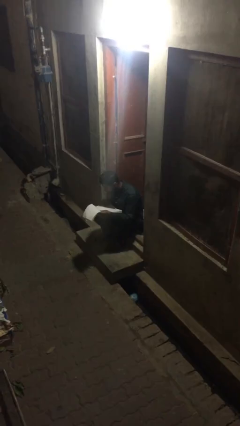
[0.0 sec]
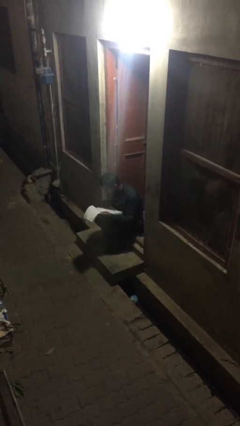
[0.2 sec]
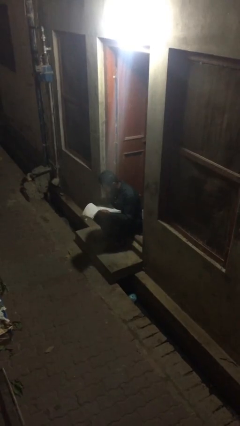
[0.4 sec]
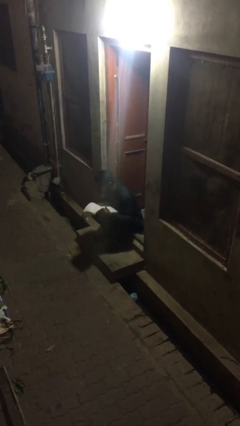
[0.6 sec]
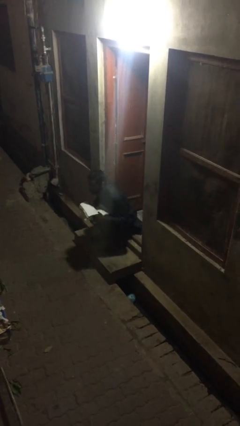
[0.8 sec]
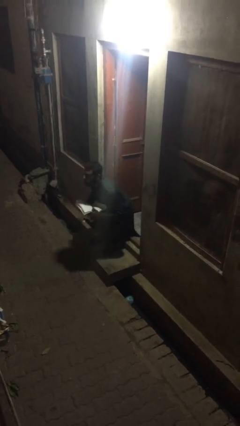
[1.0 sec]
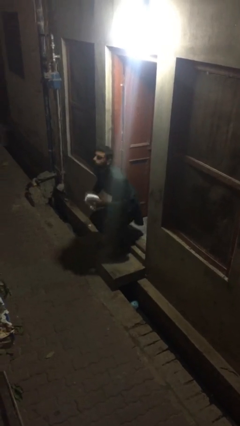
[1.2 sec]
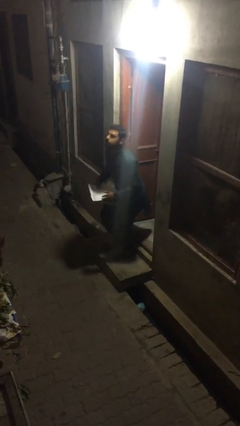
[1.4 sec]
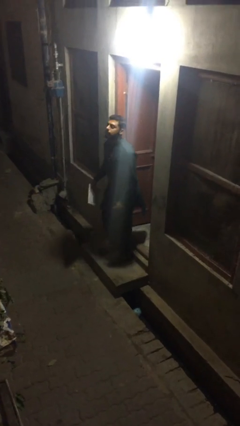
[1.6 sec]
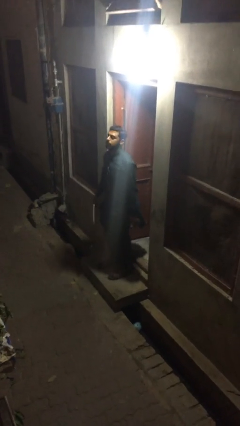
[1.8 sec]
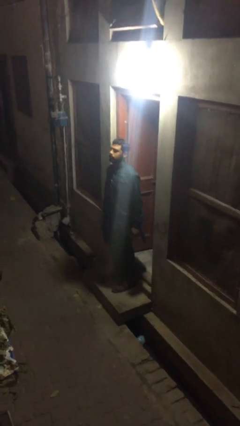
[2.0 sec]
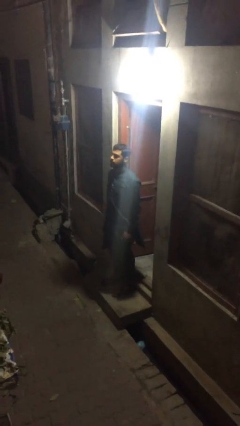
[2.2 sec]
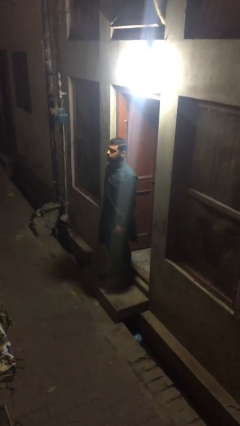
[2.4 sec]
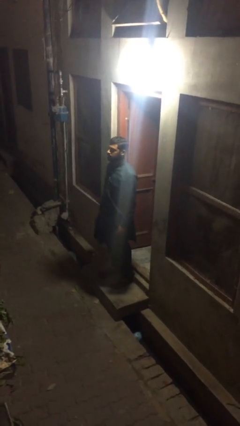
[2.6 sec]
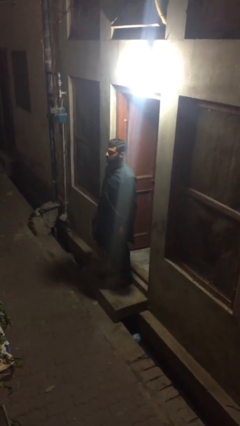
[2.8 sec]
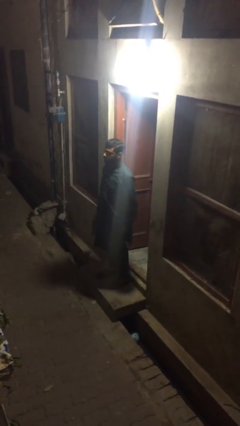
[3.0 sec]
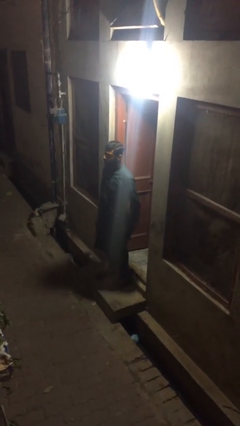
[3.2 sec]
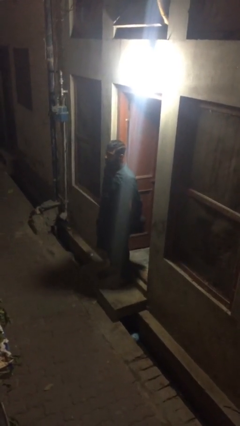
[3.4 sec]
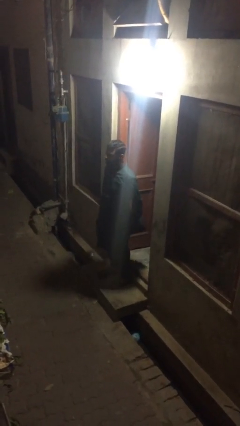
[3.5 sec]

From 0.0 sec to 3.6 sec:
person stands up

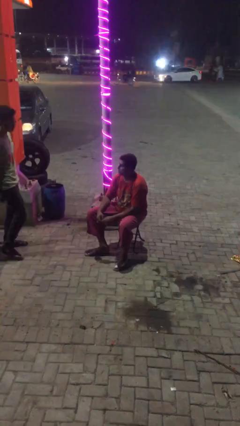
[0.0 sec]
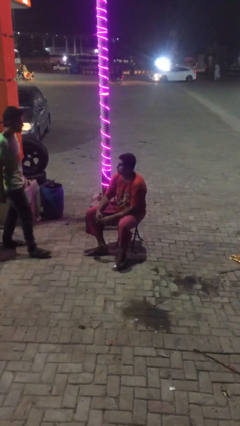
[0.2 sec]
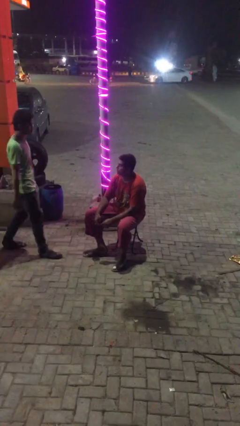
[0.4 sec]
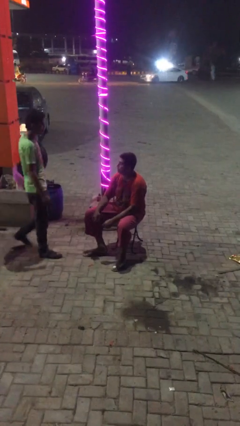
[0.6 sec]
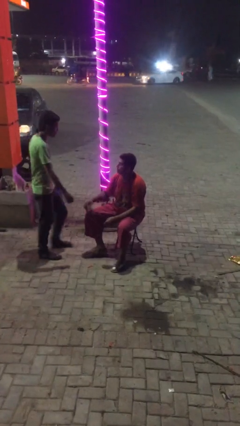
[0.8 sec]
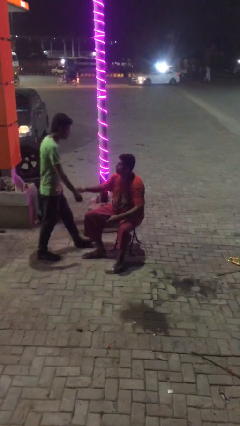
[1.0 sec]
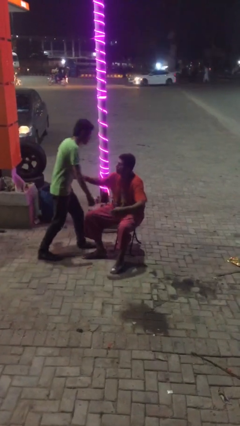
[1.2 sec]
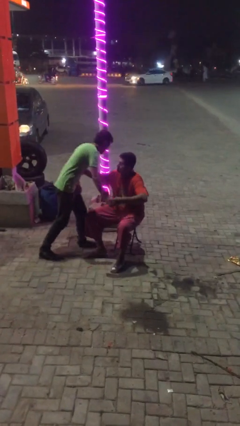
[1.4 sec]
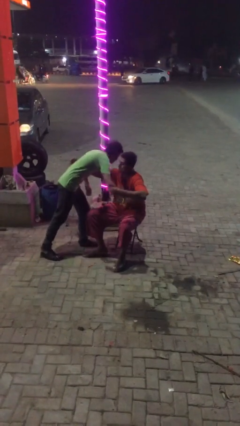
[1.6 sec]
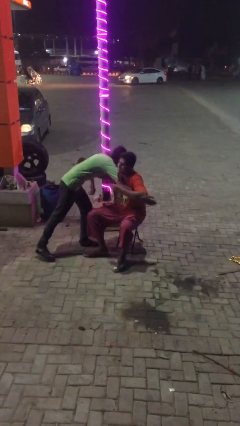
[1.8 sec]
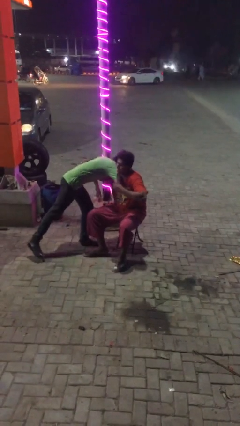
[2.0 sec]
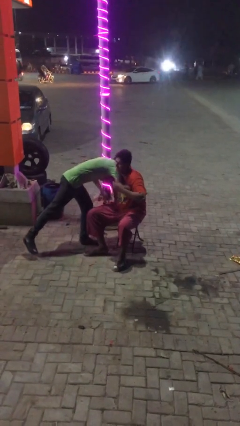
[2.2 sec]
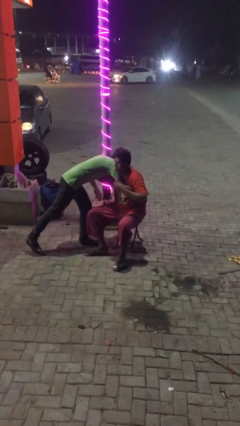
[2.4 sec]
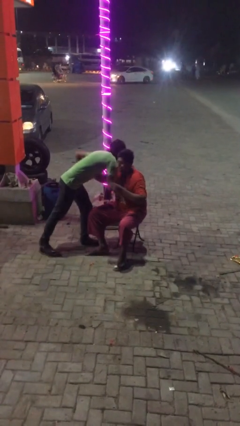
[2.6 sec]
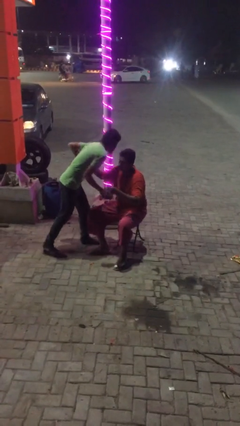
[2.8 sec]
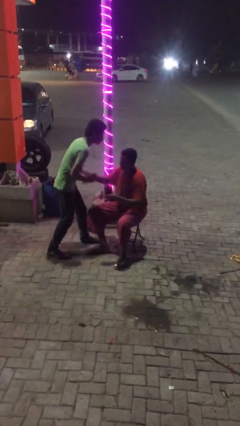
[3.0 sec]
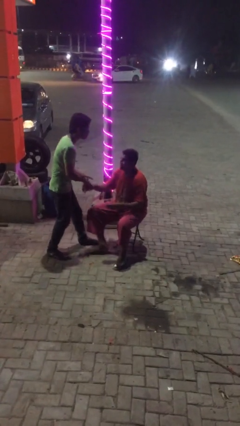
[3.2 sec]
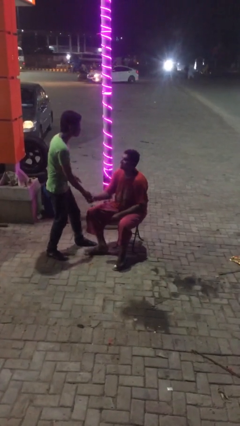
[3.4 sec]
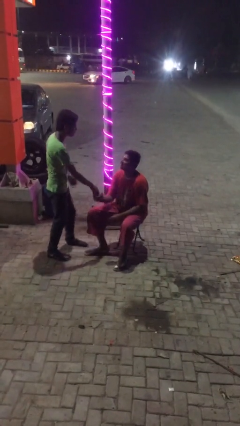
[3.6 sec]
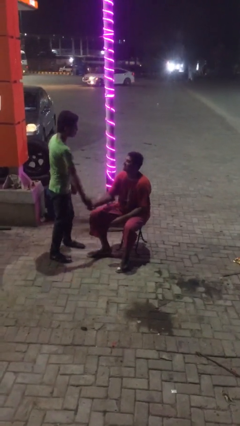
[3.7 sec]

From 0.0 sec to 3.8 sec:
person embraces person

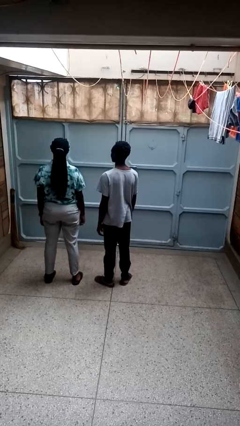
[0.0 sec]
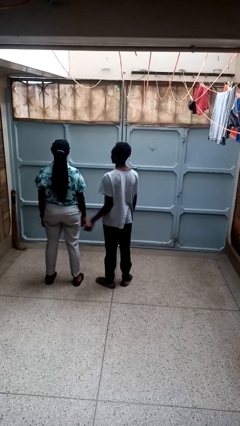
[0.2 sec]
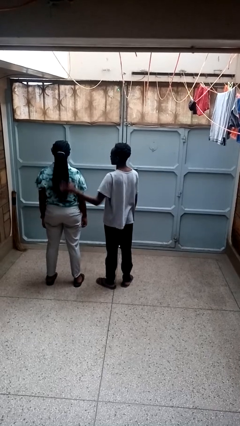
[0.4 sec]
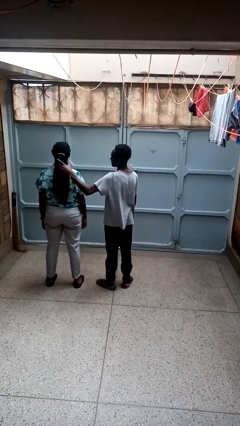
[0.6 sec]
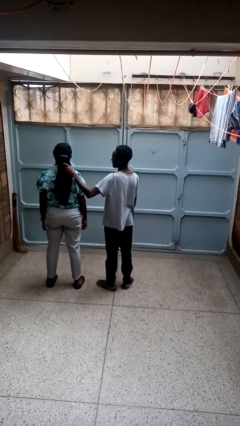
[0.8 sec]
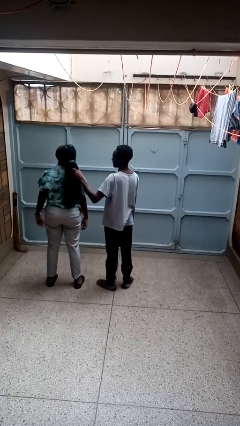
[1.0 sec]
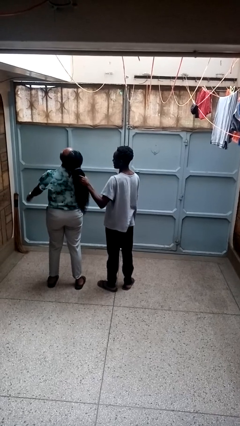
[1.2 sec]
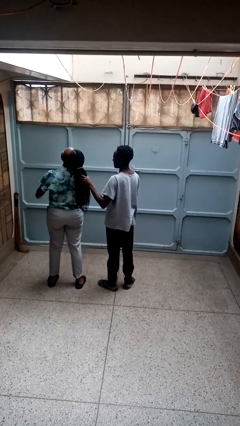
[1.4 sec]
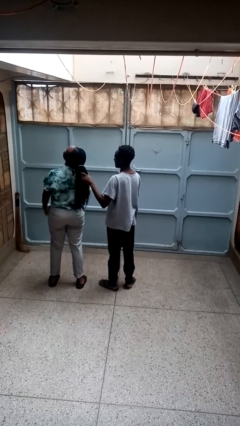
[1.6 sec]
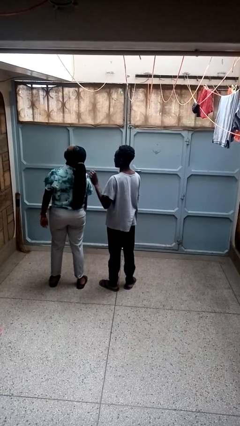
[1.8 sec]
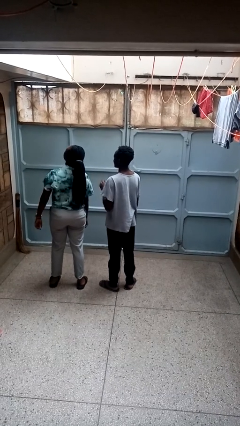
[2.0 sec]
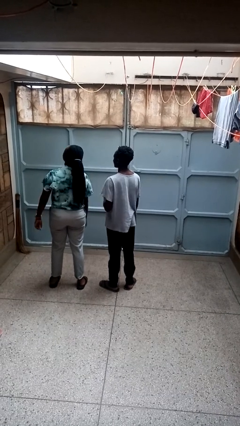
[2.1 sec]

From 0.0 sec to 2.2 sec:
person grabs person by hair

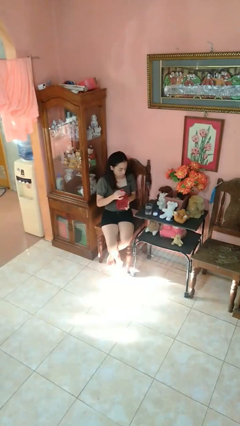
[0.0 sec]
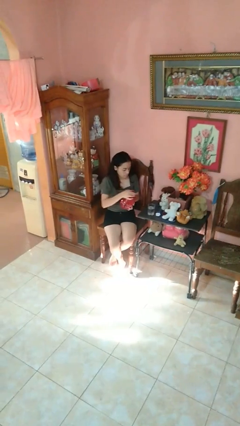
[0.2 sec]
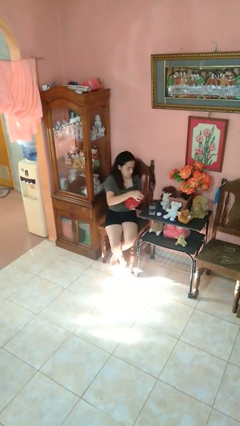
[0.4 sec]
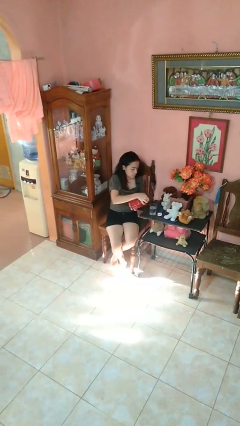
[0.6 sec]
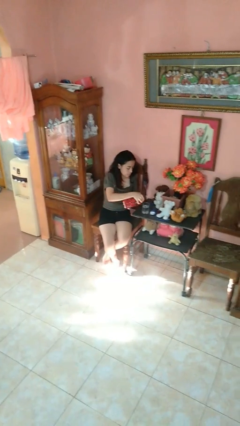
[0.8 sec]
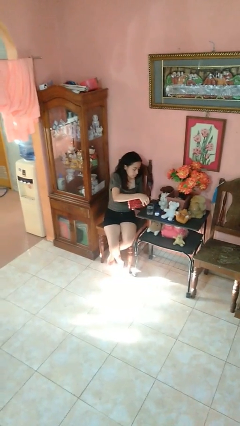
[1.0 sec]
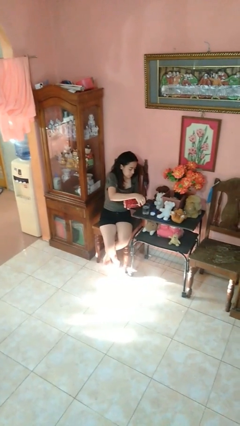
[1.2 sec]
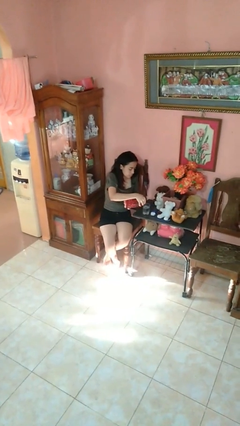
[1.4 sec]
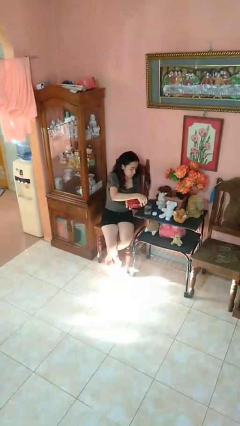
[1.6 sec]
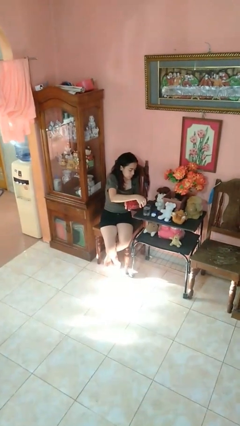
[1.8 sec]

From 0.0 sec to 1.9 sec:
person pours liquid into cup

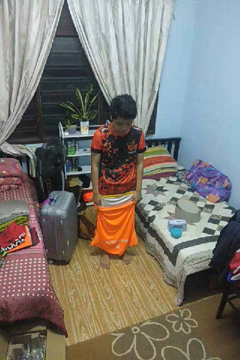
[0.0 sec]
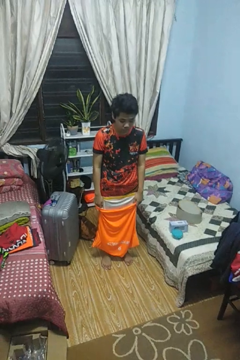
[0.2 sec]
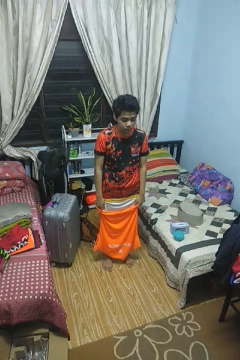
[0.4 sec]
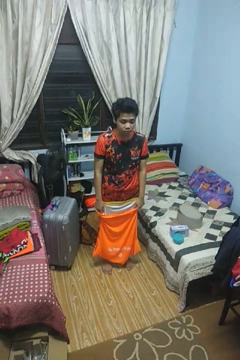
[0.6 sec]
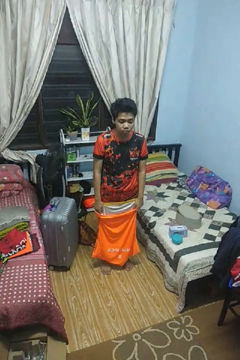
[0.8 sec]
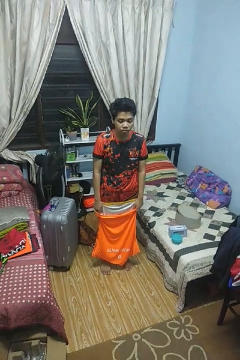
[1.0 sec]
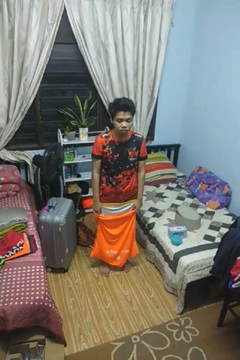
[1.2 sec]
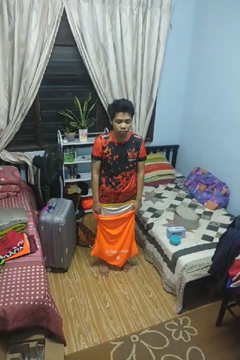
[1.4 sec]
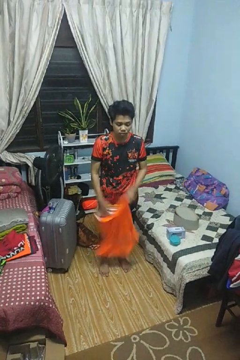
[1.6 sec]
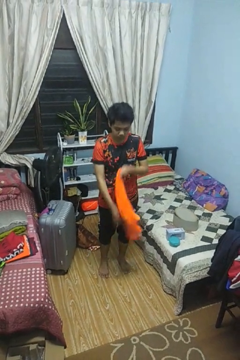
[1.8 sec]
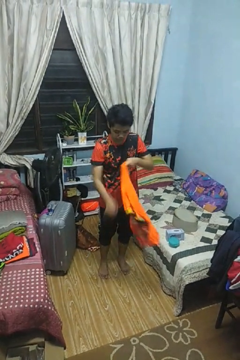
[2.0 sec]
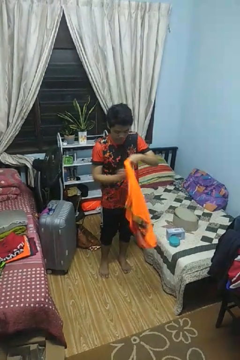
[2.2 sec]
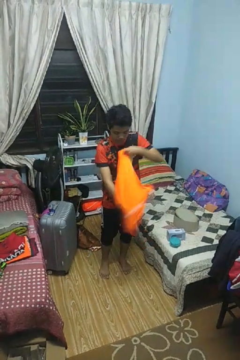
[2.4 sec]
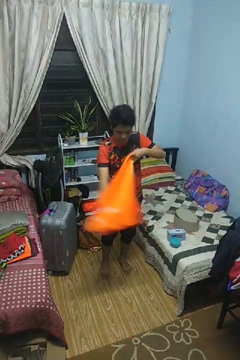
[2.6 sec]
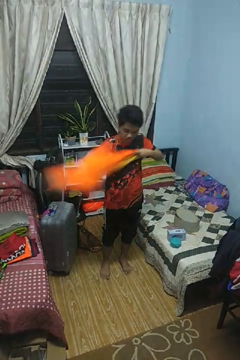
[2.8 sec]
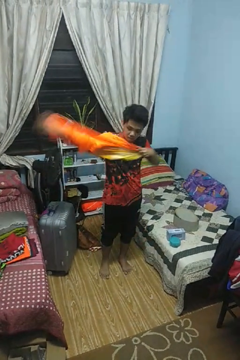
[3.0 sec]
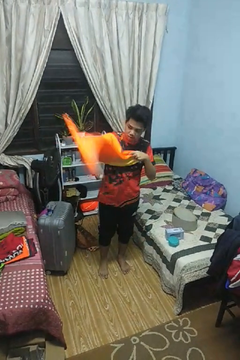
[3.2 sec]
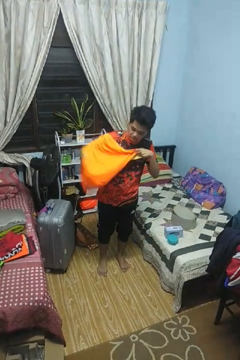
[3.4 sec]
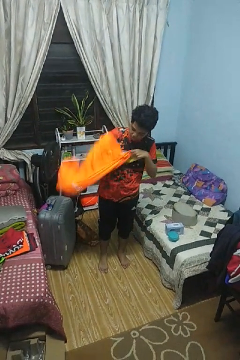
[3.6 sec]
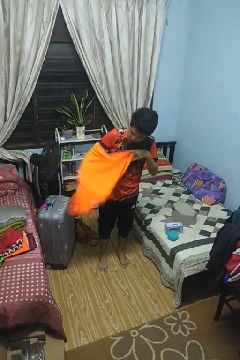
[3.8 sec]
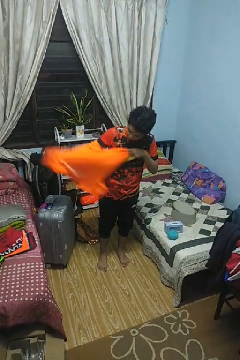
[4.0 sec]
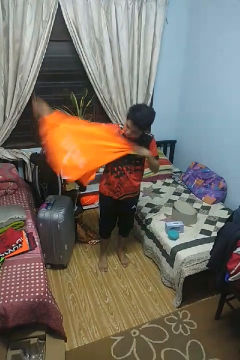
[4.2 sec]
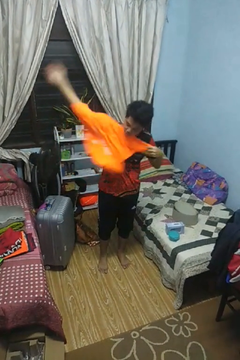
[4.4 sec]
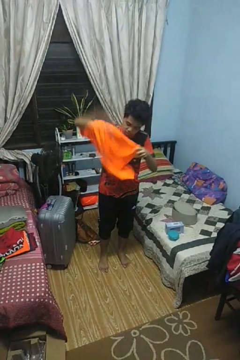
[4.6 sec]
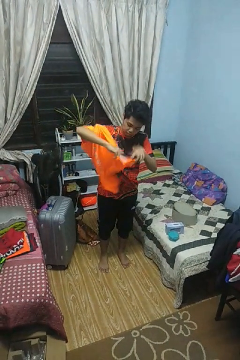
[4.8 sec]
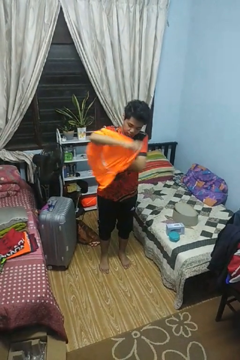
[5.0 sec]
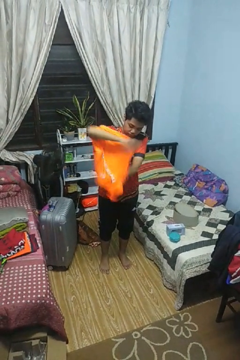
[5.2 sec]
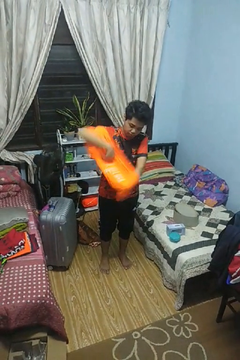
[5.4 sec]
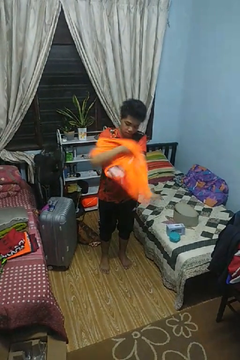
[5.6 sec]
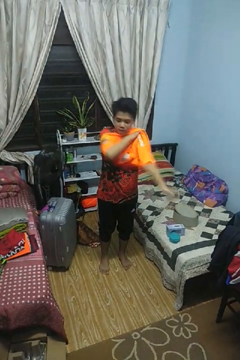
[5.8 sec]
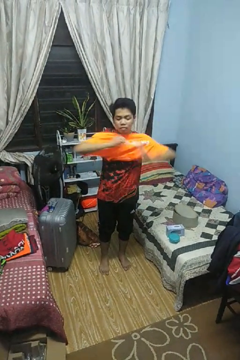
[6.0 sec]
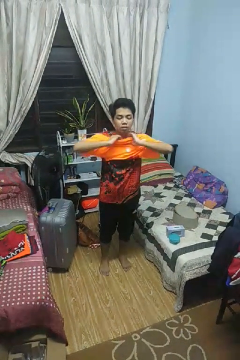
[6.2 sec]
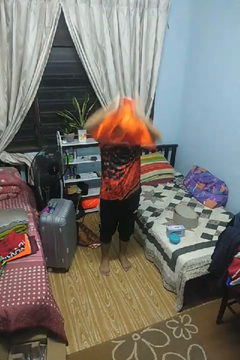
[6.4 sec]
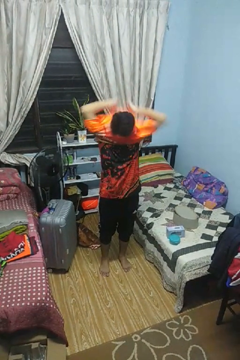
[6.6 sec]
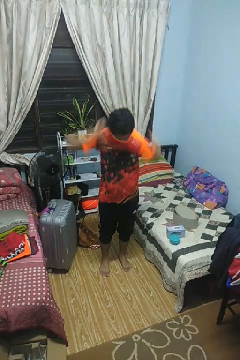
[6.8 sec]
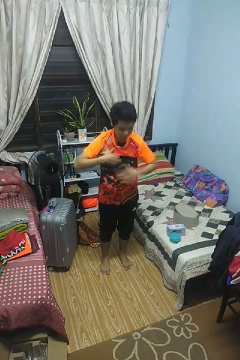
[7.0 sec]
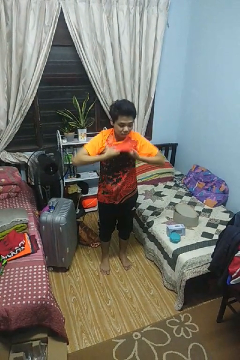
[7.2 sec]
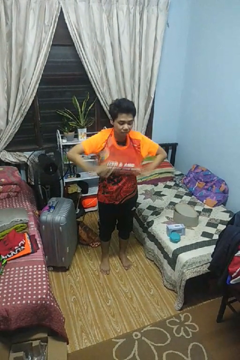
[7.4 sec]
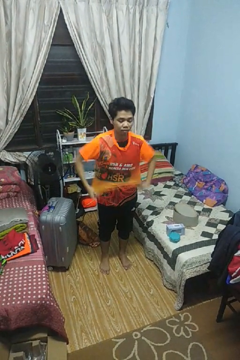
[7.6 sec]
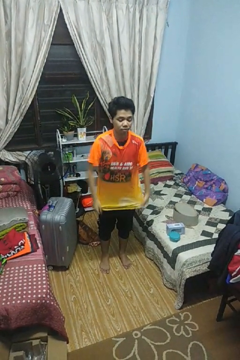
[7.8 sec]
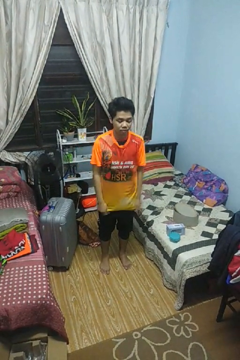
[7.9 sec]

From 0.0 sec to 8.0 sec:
person puts on shirt
